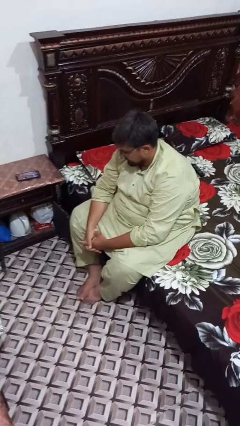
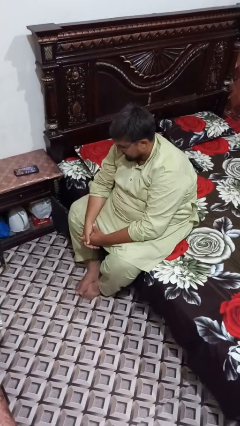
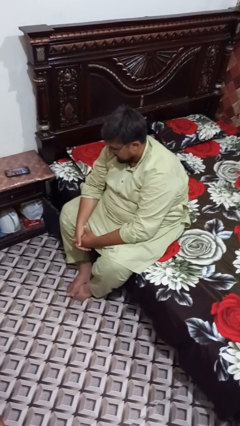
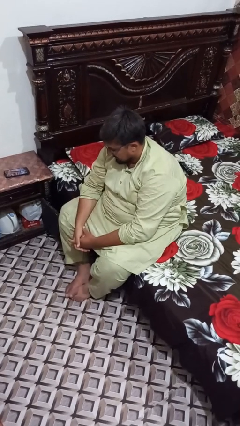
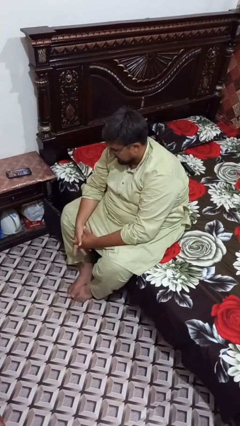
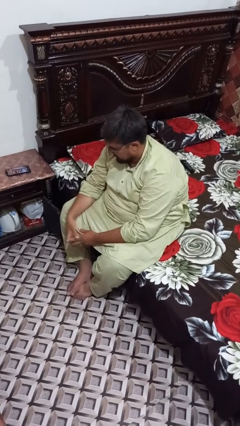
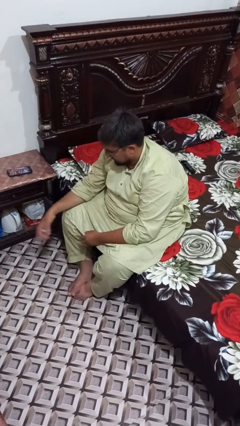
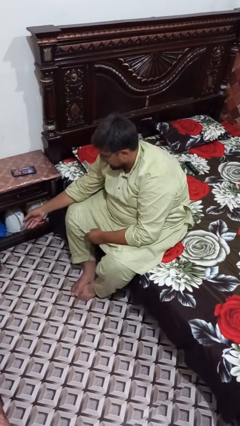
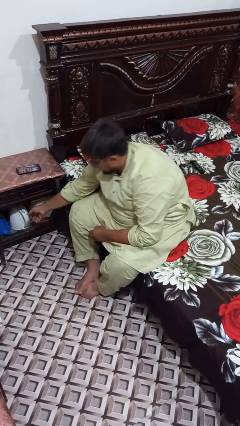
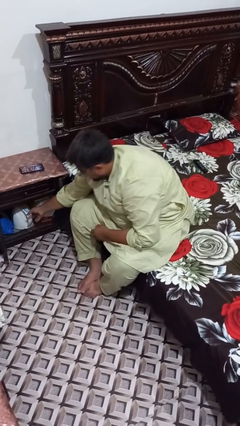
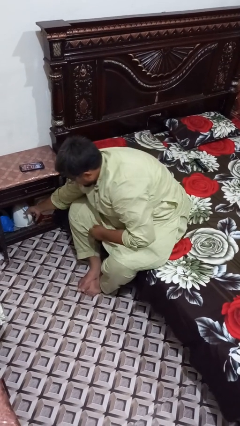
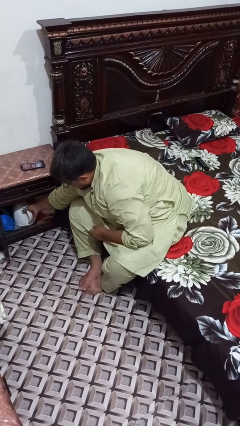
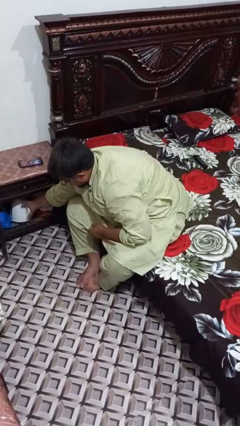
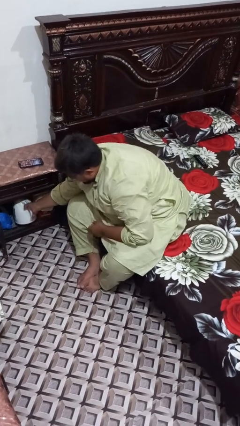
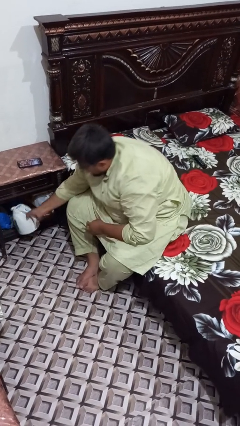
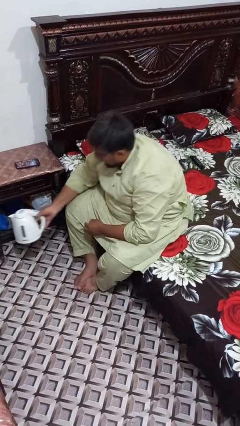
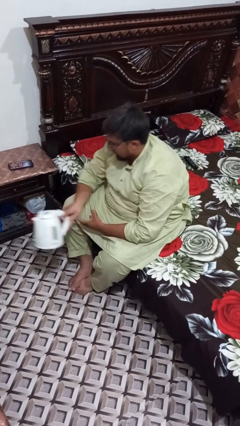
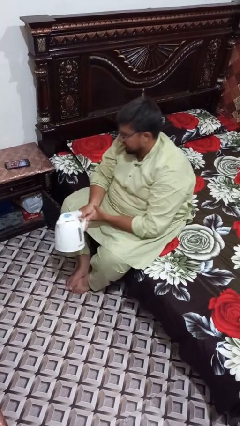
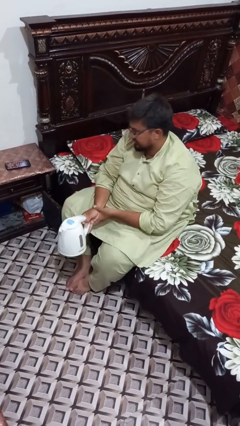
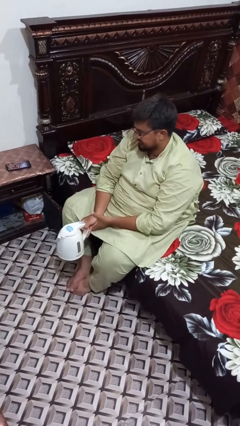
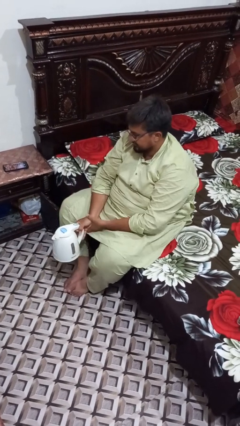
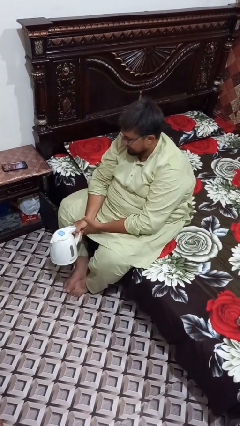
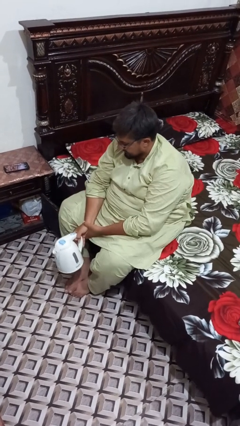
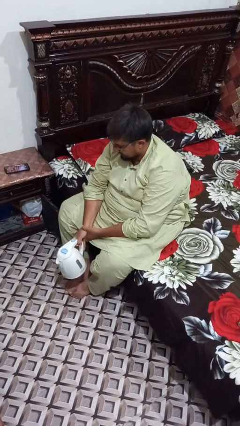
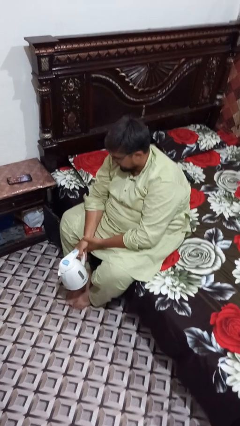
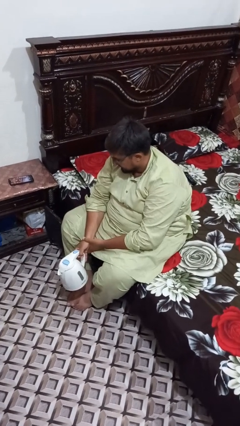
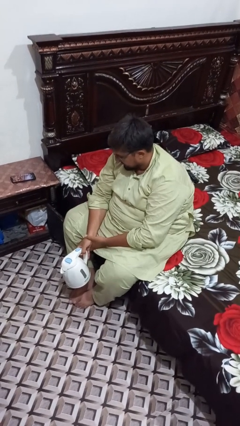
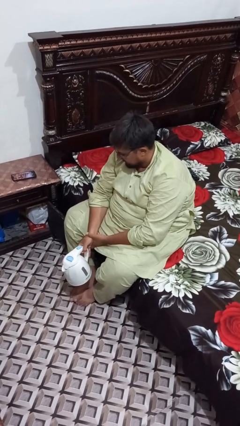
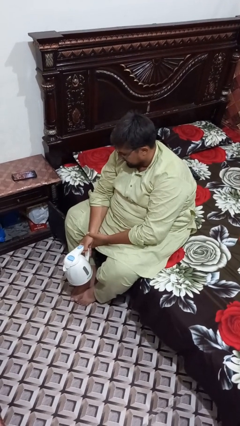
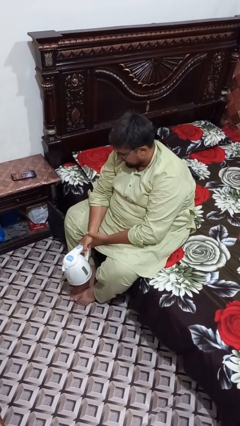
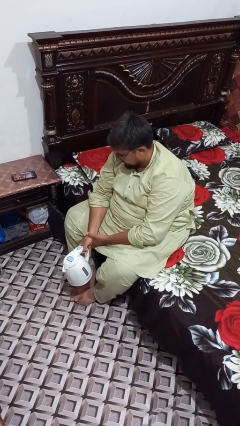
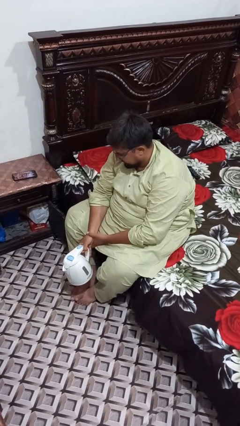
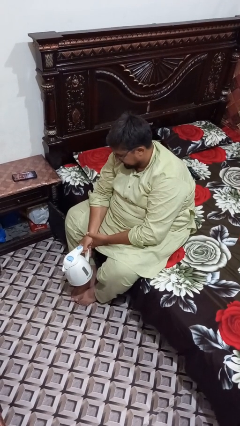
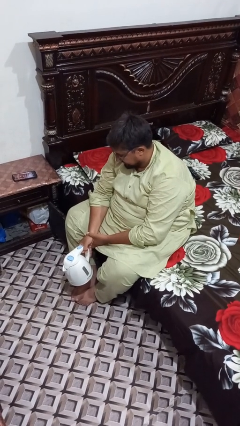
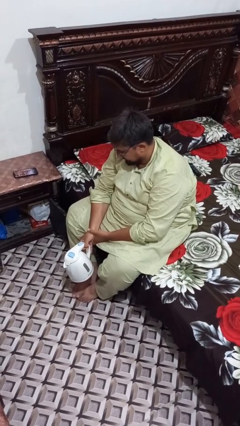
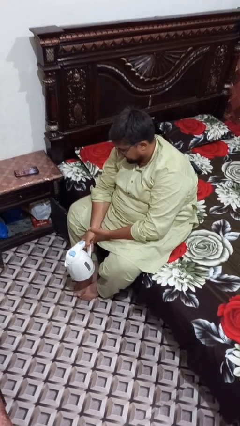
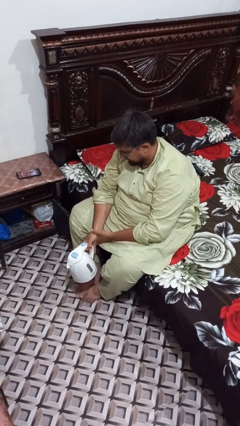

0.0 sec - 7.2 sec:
person picks up object from cabinet

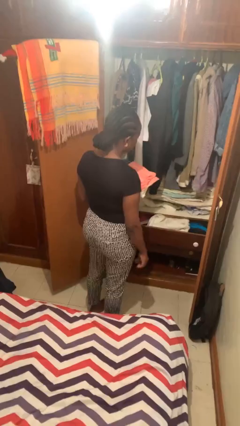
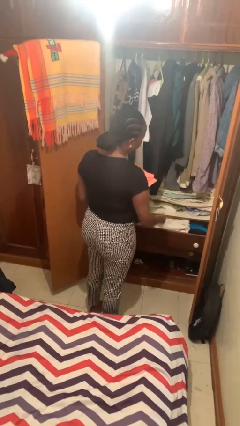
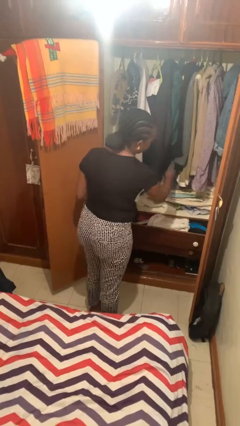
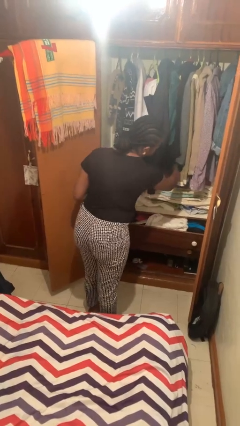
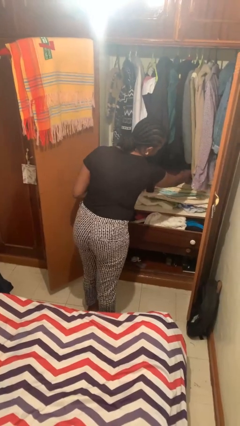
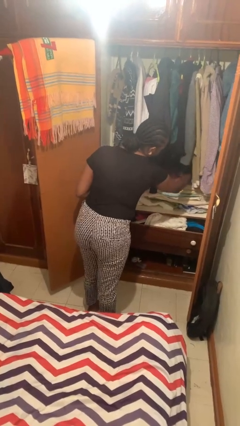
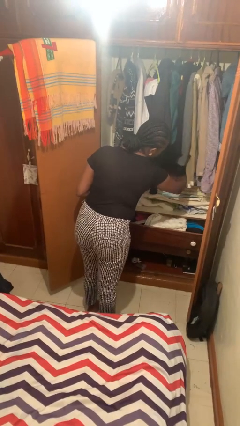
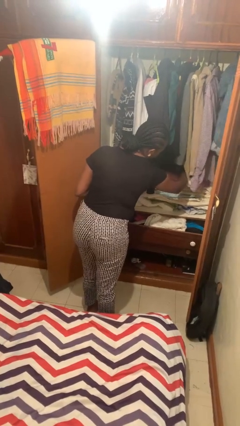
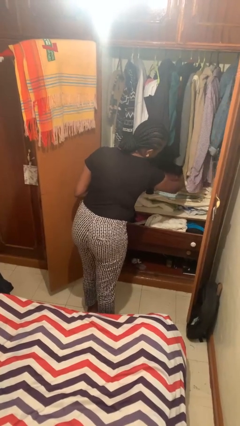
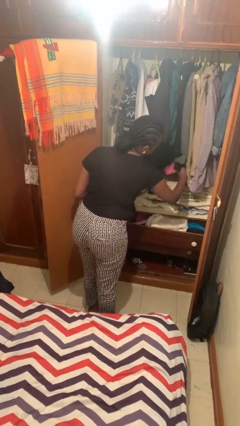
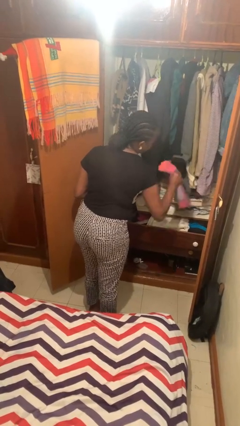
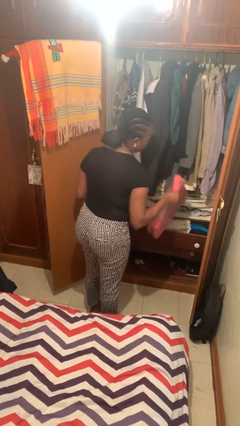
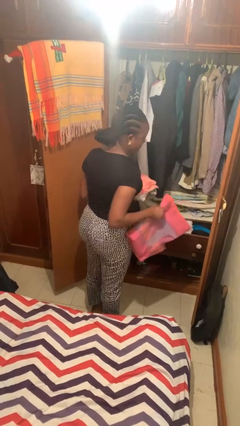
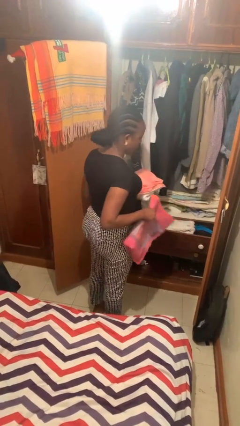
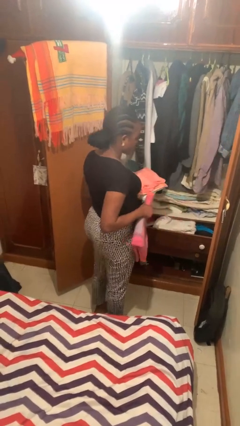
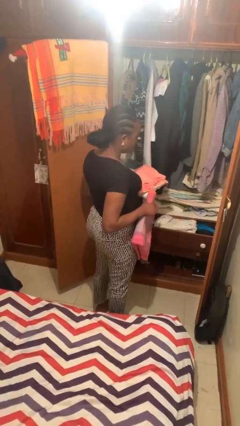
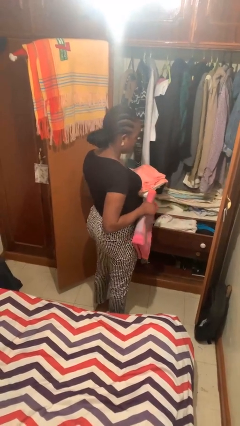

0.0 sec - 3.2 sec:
person takes clothes from dresser

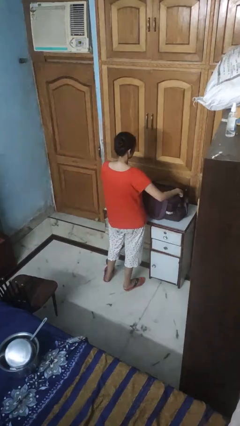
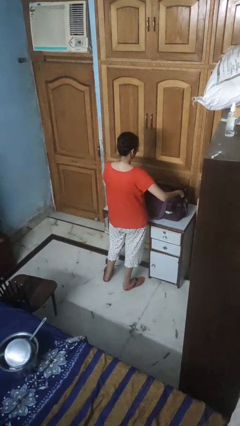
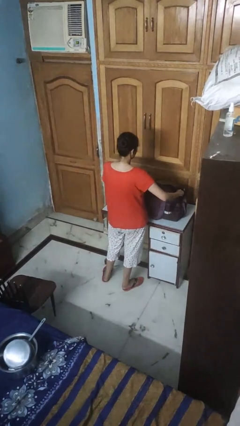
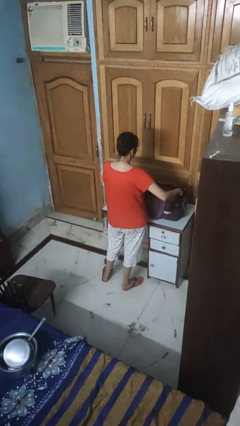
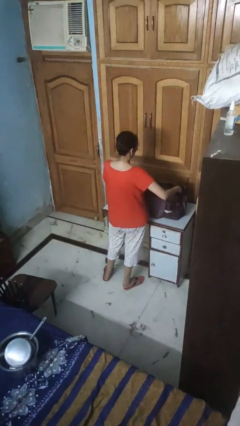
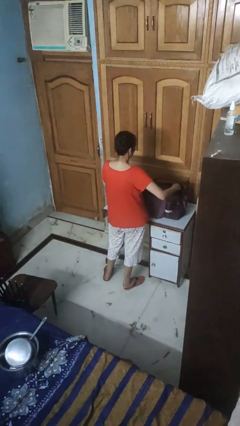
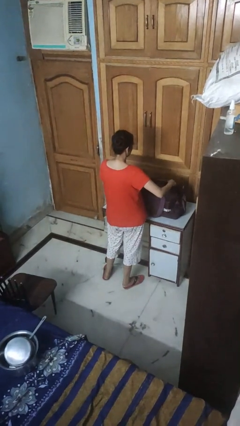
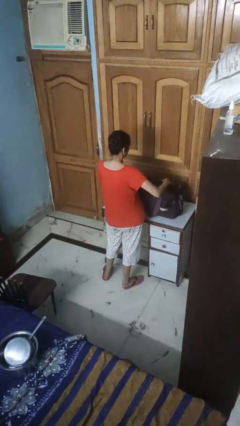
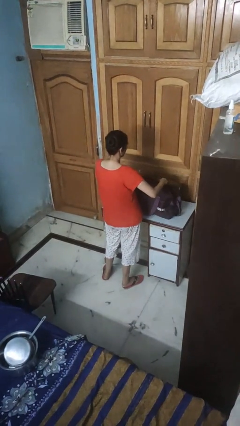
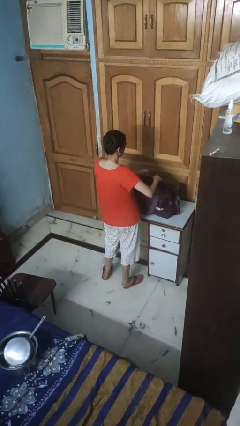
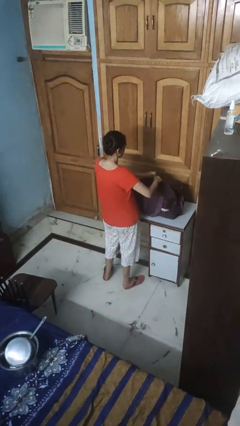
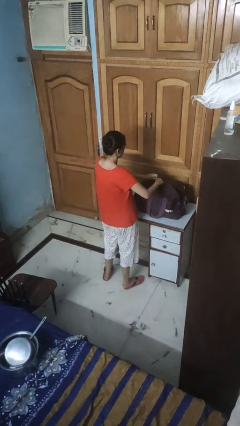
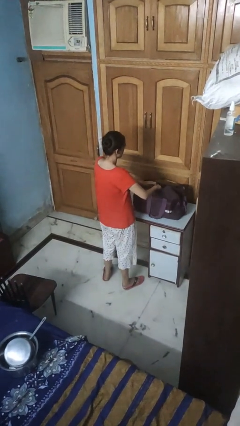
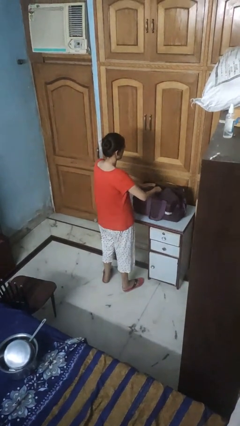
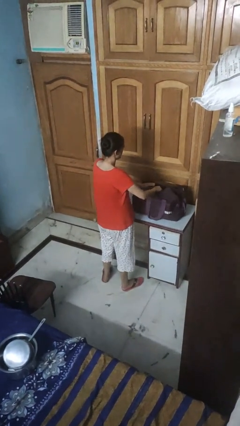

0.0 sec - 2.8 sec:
person closes suitcase

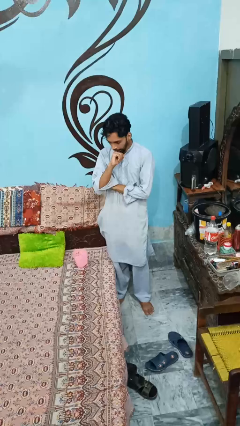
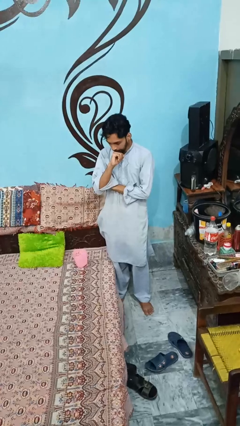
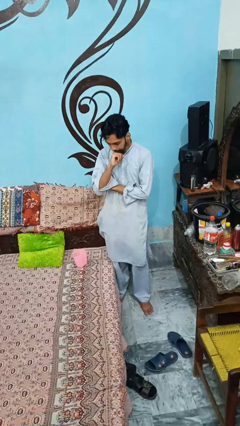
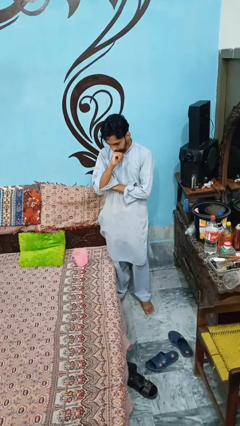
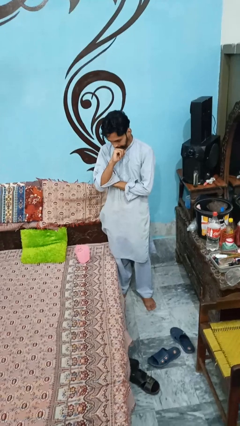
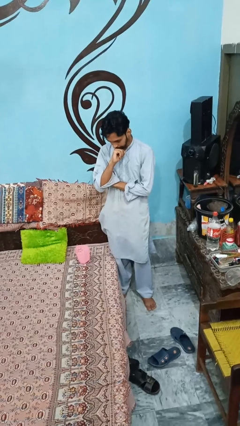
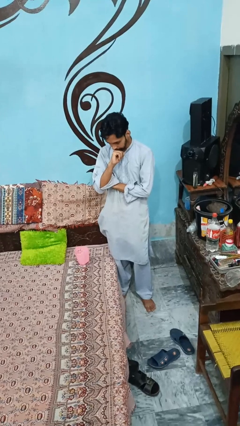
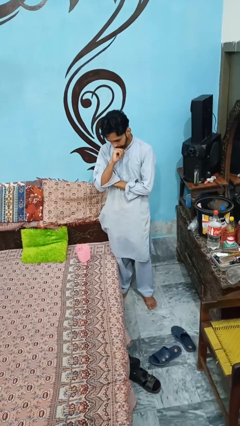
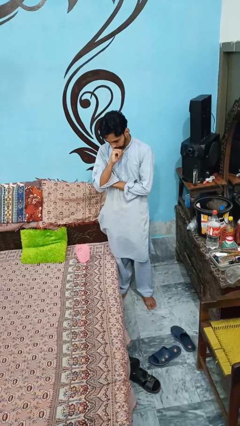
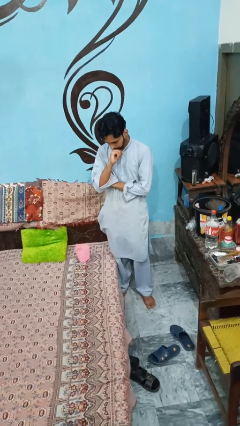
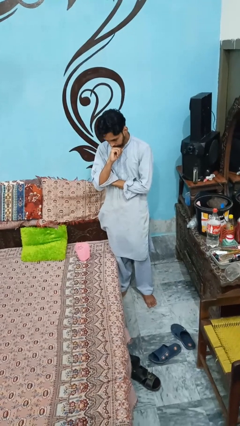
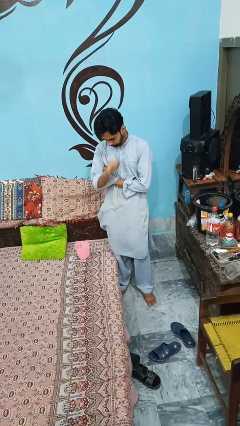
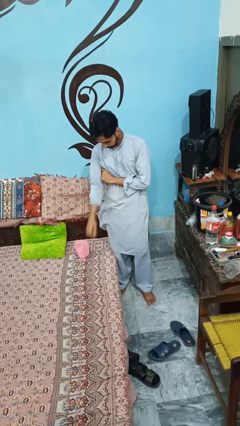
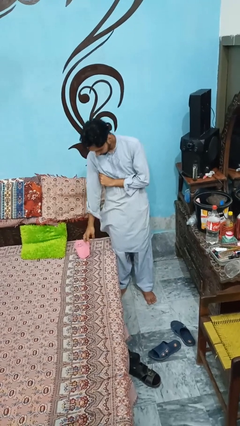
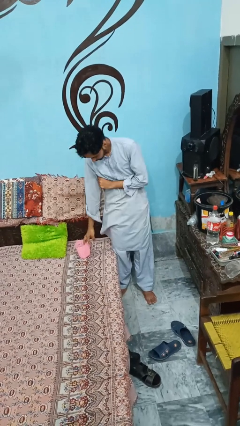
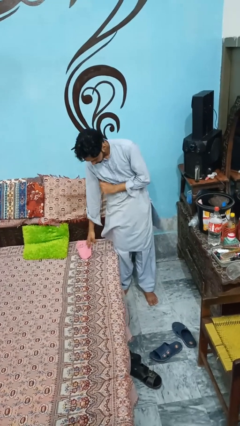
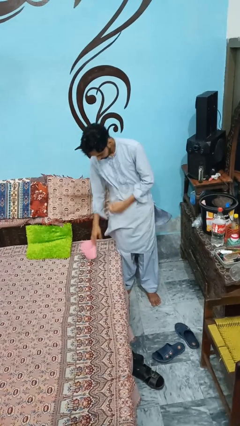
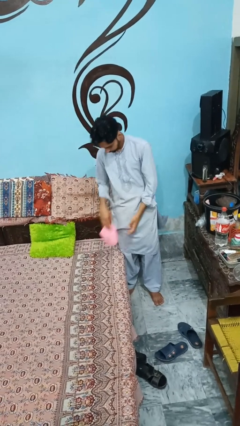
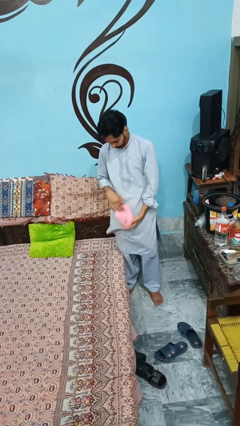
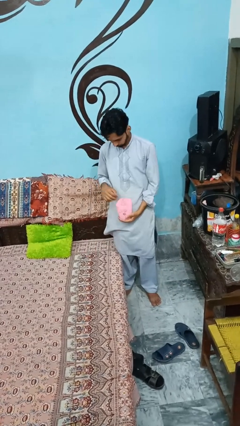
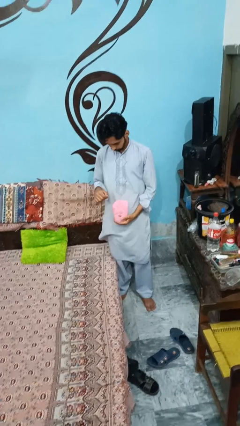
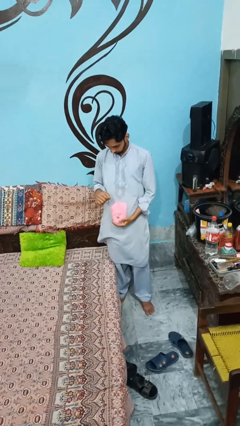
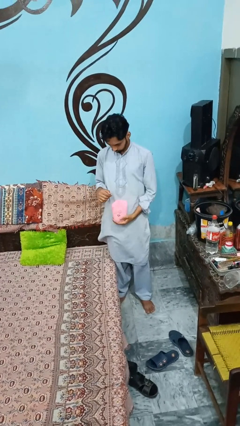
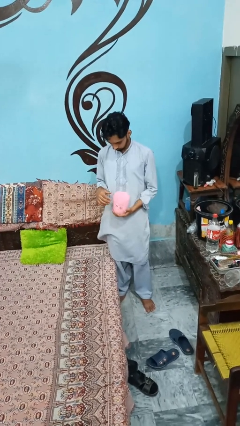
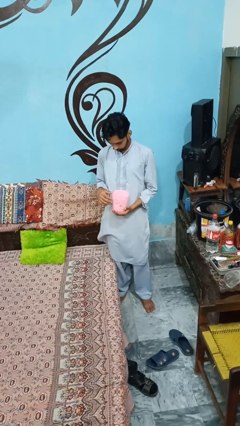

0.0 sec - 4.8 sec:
person picks up object from couch
